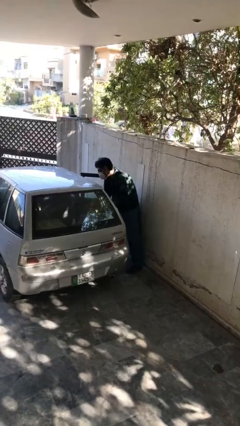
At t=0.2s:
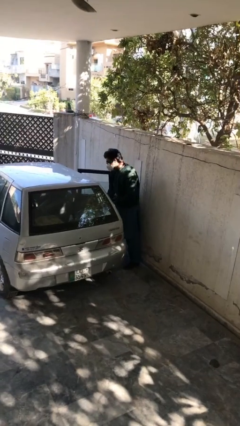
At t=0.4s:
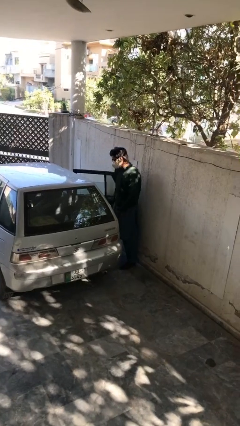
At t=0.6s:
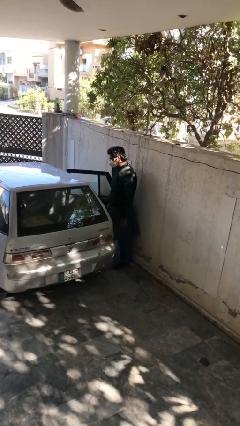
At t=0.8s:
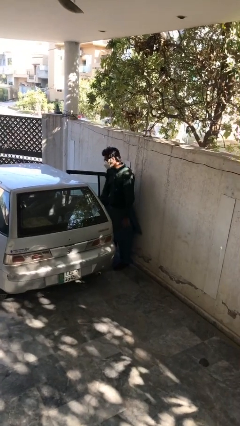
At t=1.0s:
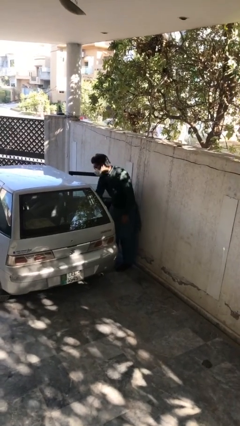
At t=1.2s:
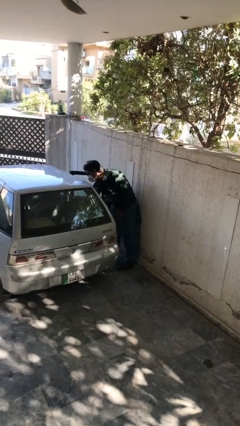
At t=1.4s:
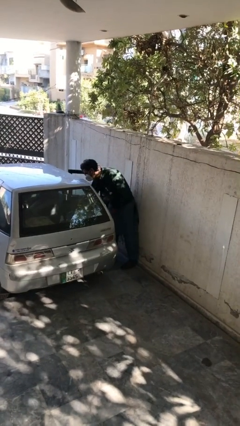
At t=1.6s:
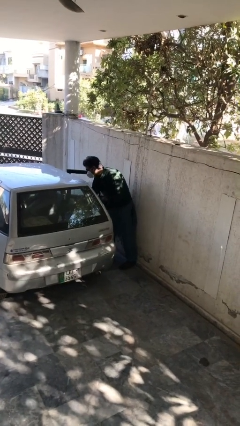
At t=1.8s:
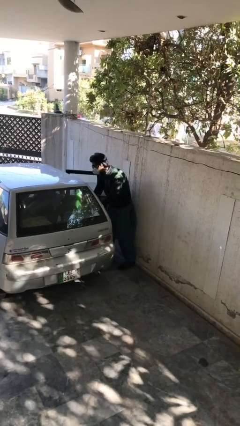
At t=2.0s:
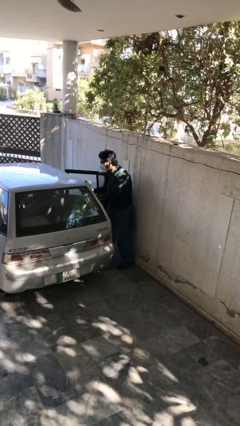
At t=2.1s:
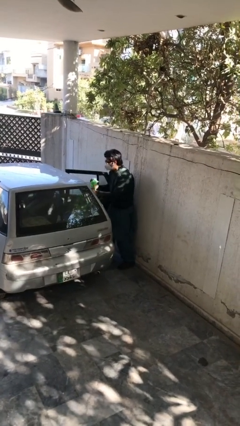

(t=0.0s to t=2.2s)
person unloads car

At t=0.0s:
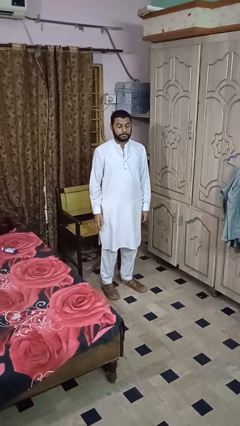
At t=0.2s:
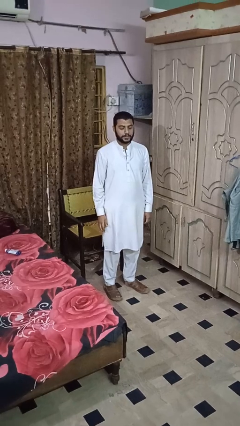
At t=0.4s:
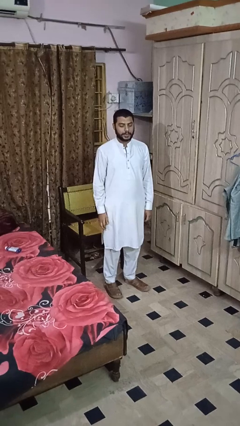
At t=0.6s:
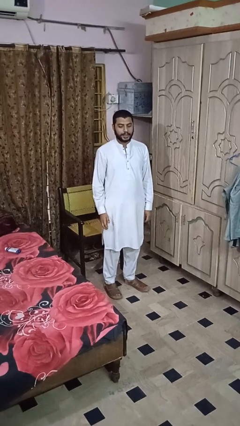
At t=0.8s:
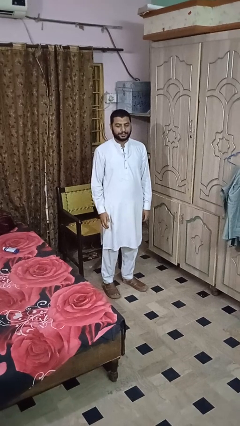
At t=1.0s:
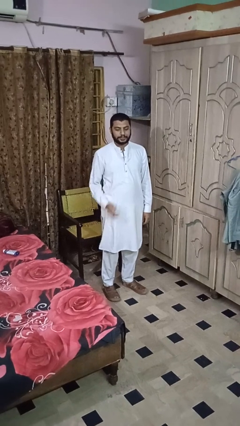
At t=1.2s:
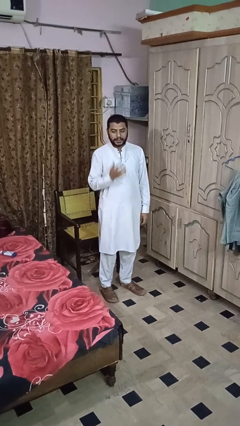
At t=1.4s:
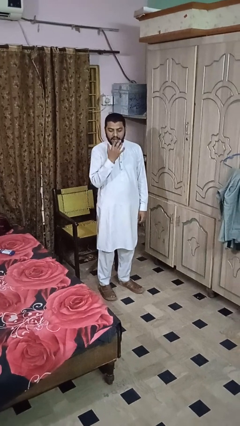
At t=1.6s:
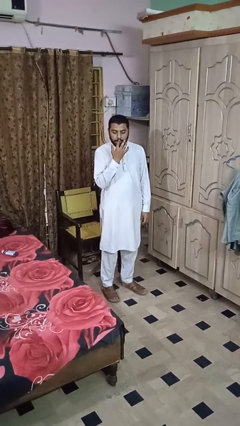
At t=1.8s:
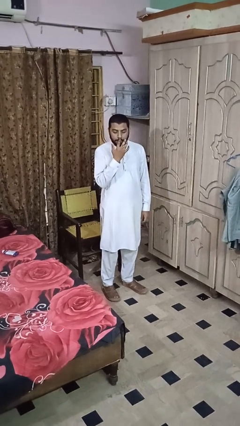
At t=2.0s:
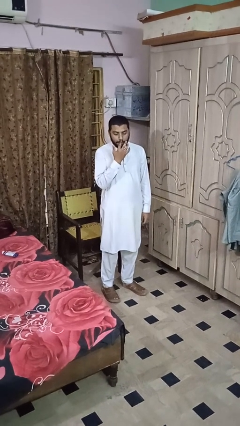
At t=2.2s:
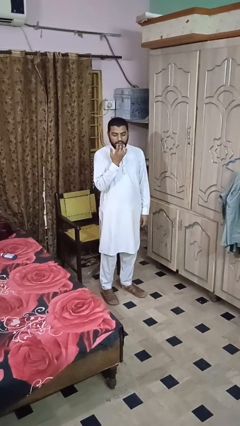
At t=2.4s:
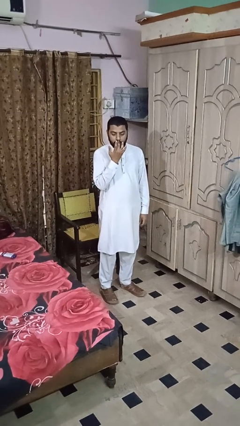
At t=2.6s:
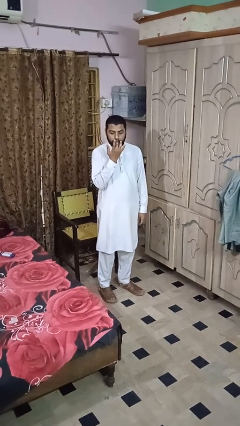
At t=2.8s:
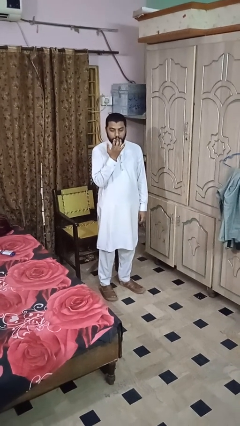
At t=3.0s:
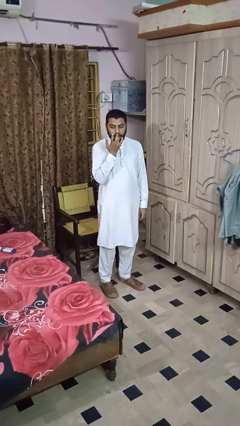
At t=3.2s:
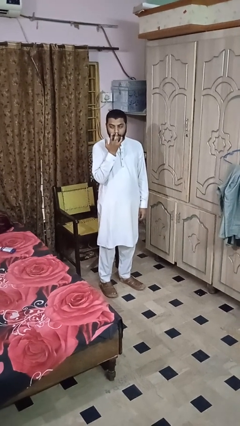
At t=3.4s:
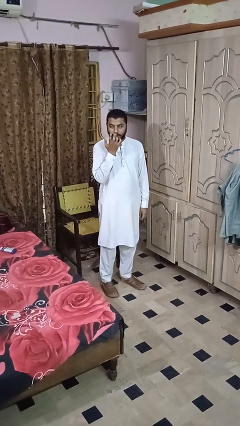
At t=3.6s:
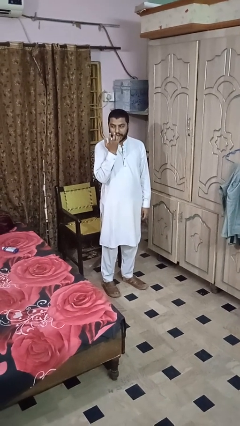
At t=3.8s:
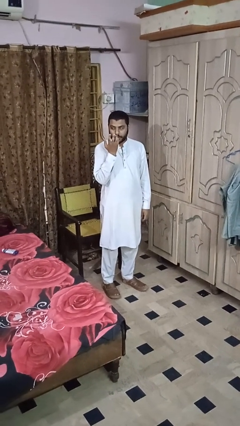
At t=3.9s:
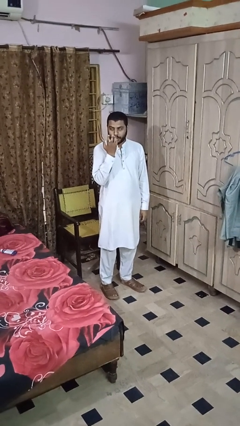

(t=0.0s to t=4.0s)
person licks fingers

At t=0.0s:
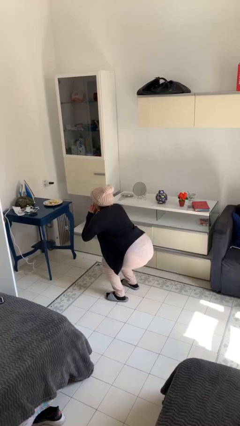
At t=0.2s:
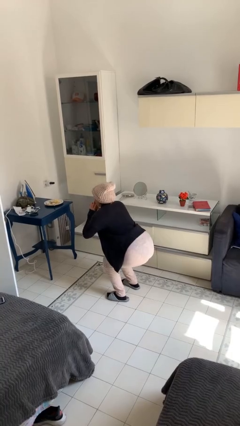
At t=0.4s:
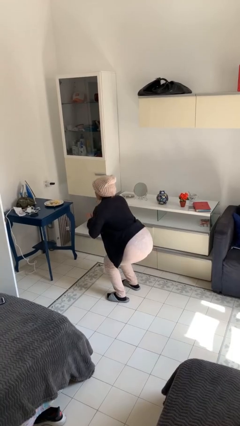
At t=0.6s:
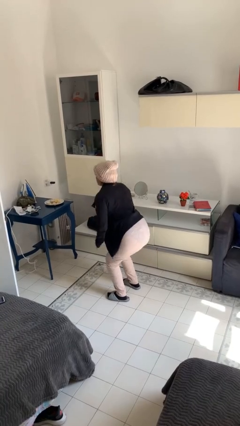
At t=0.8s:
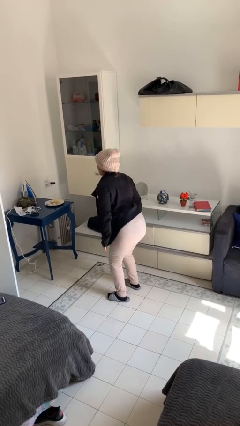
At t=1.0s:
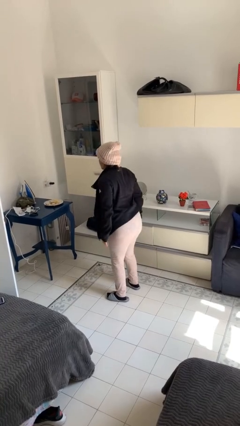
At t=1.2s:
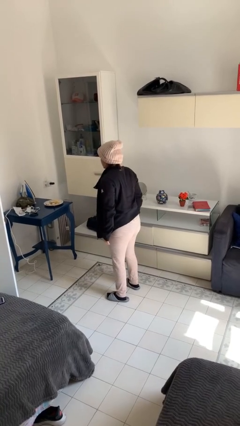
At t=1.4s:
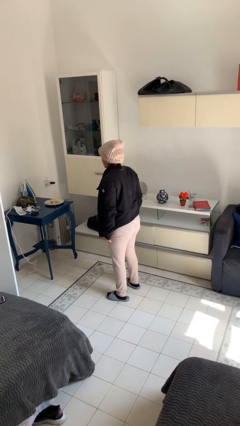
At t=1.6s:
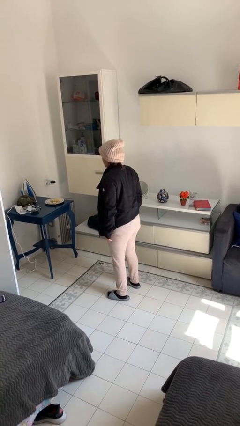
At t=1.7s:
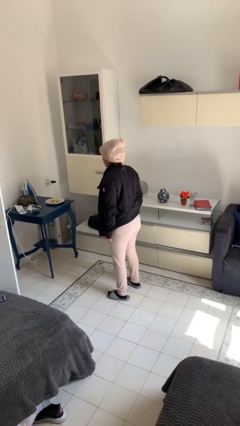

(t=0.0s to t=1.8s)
person stands up

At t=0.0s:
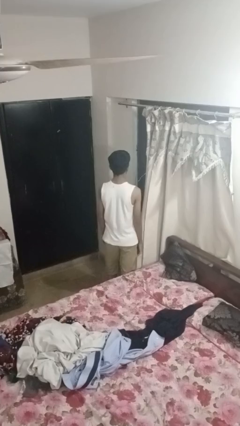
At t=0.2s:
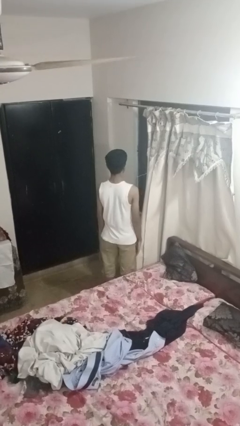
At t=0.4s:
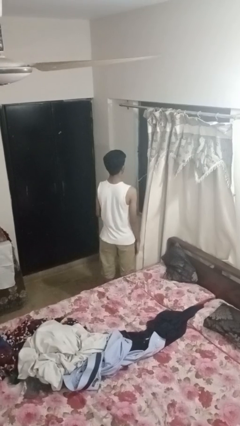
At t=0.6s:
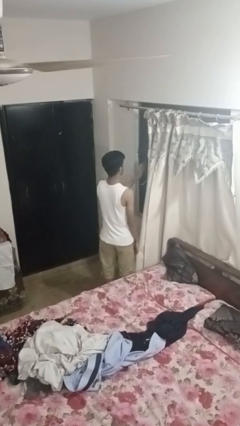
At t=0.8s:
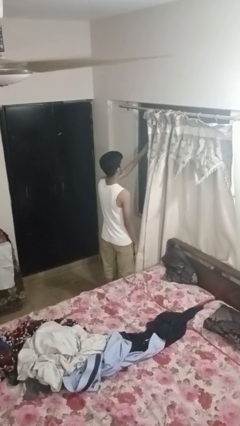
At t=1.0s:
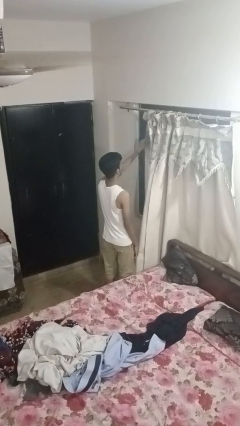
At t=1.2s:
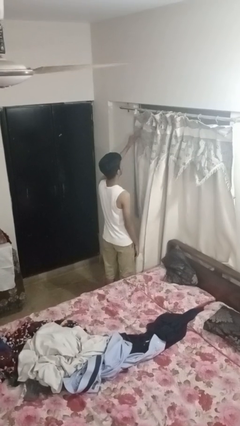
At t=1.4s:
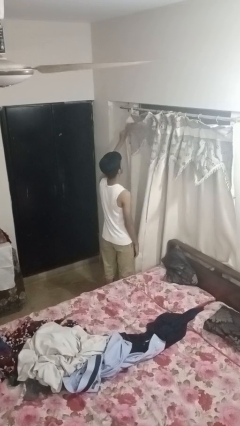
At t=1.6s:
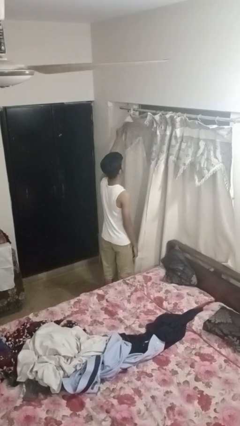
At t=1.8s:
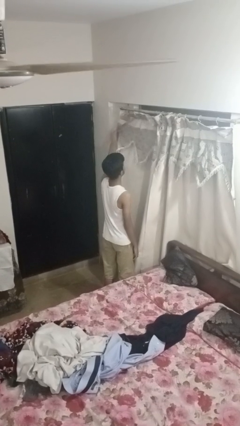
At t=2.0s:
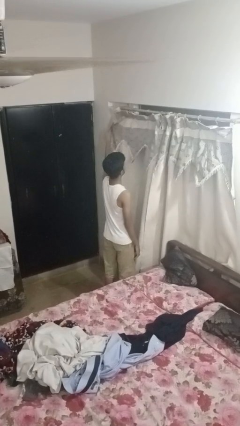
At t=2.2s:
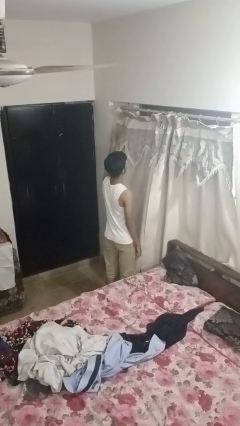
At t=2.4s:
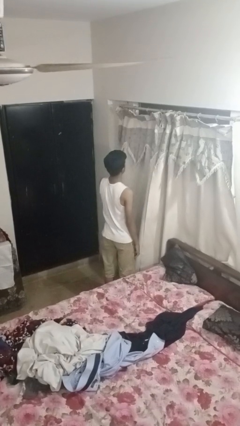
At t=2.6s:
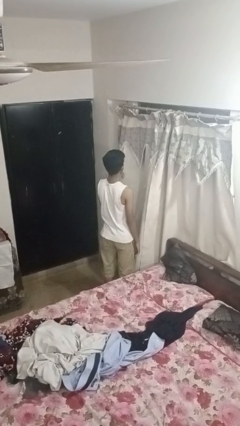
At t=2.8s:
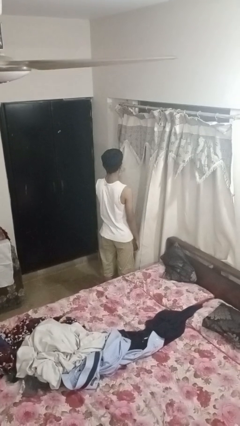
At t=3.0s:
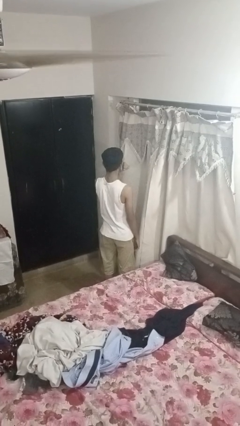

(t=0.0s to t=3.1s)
person closes curtains

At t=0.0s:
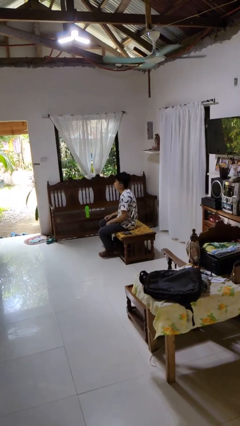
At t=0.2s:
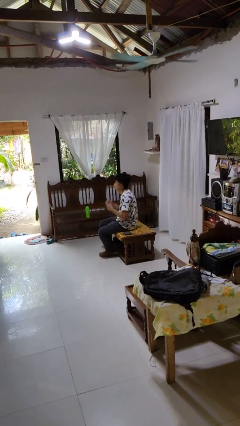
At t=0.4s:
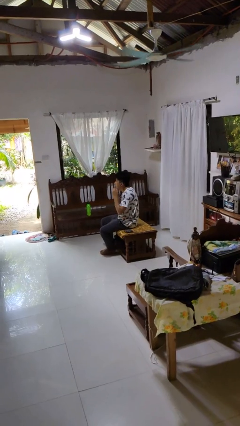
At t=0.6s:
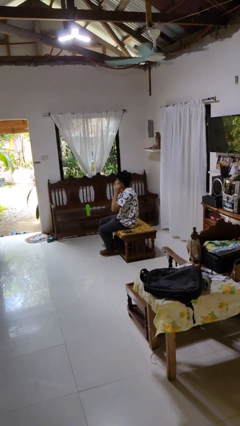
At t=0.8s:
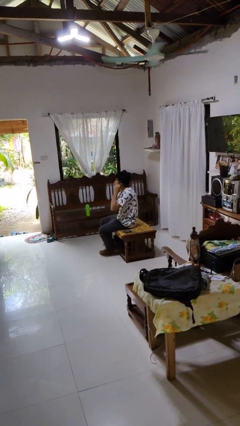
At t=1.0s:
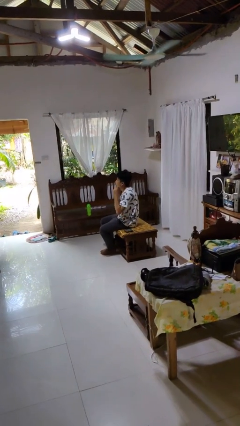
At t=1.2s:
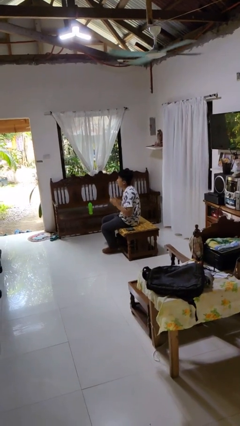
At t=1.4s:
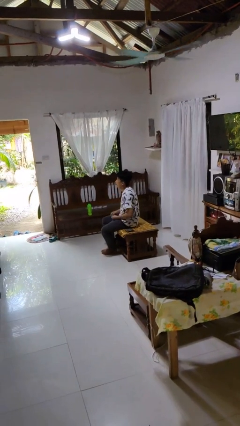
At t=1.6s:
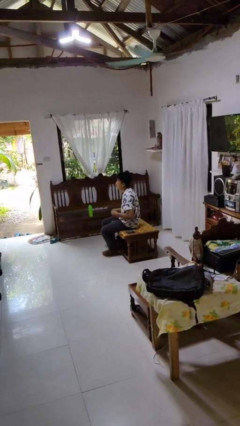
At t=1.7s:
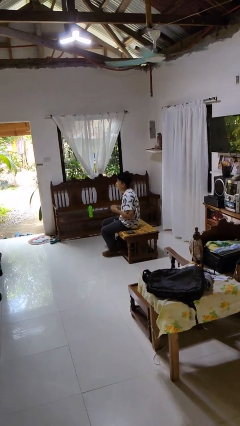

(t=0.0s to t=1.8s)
person takes off headphones

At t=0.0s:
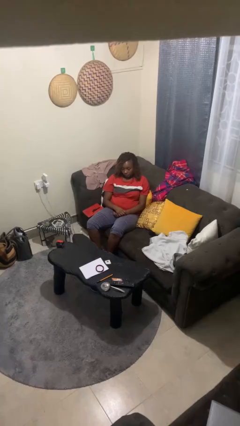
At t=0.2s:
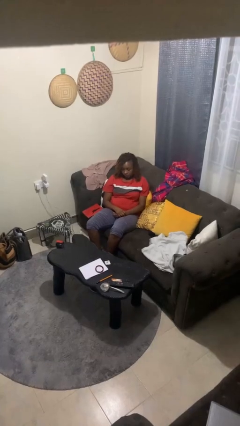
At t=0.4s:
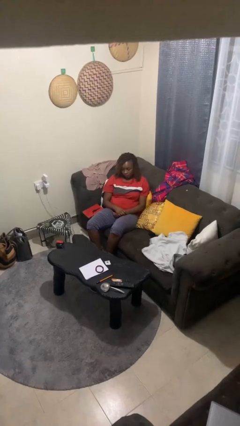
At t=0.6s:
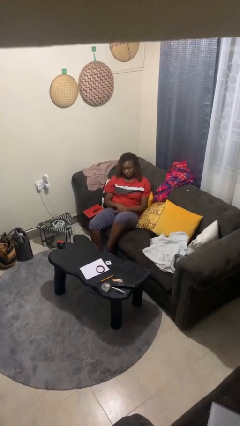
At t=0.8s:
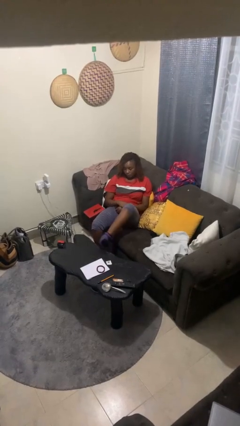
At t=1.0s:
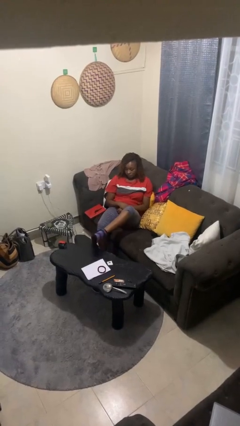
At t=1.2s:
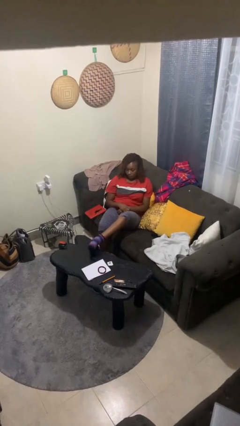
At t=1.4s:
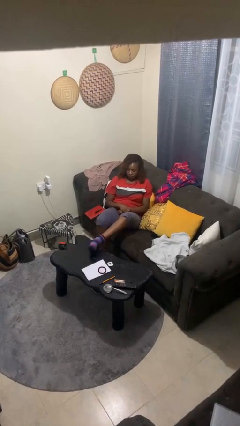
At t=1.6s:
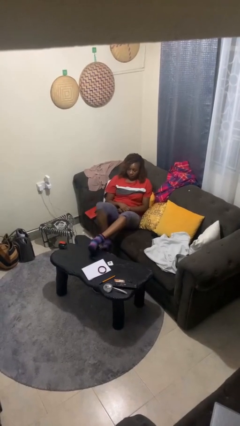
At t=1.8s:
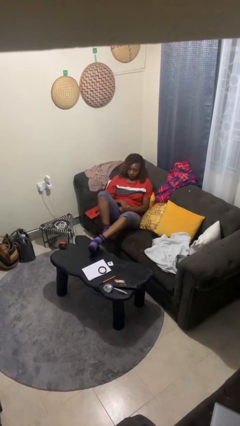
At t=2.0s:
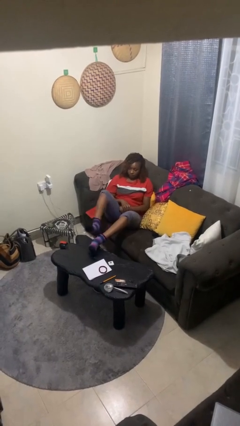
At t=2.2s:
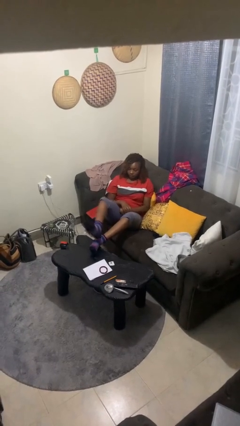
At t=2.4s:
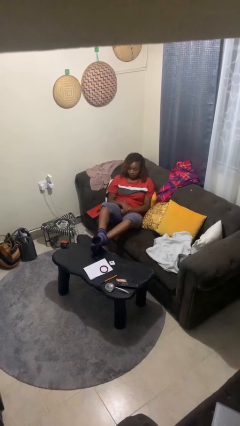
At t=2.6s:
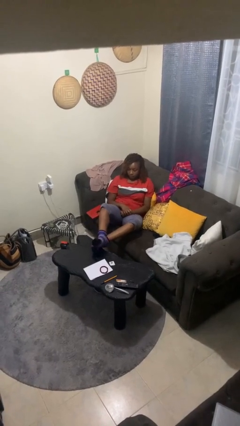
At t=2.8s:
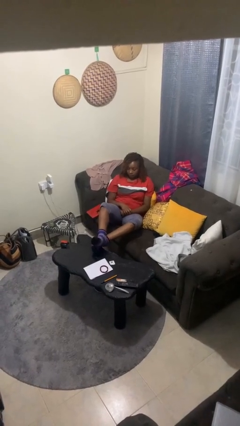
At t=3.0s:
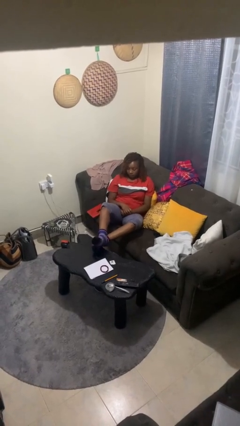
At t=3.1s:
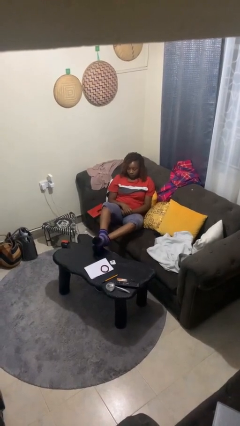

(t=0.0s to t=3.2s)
person puts feet up

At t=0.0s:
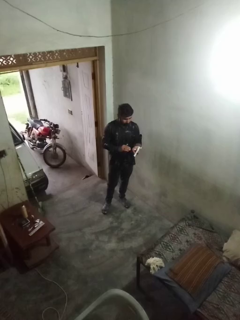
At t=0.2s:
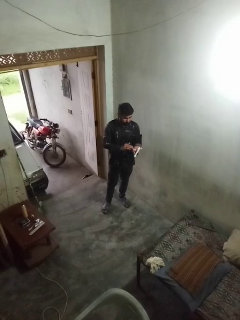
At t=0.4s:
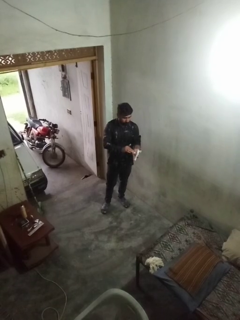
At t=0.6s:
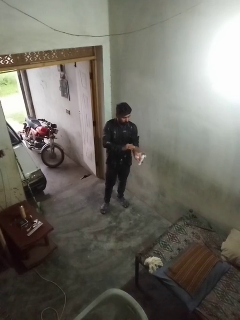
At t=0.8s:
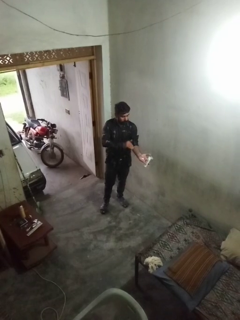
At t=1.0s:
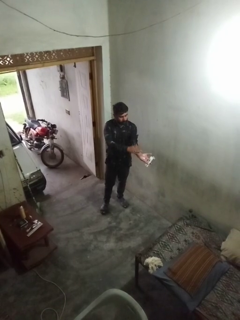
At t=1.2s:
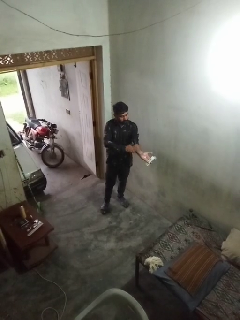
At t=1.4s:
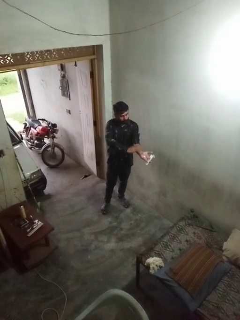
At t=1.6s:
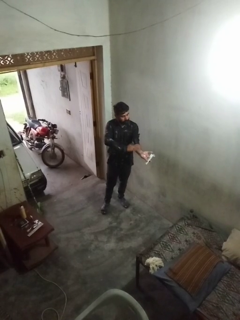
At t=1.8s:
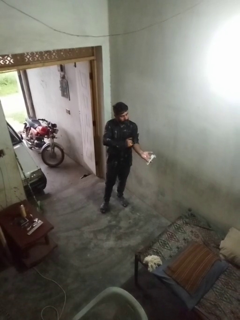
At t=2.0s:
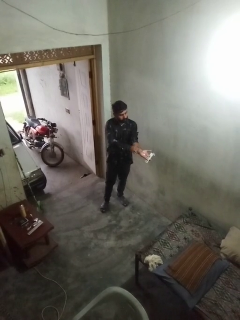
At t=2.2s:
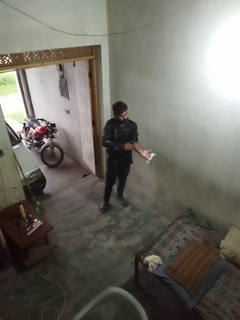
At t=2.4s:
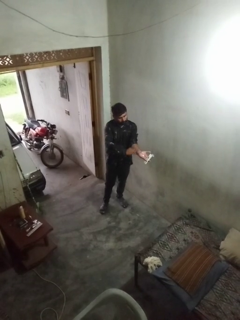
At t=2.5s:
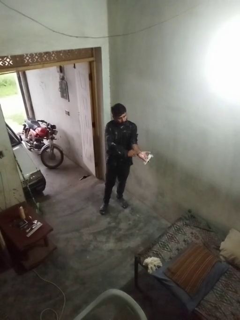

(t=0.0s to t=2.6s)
person applies sunscreen
